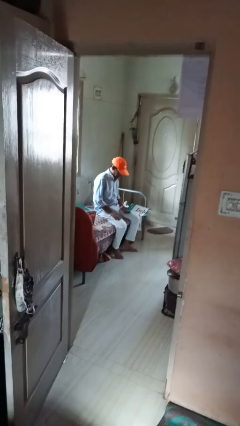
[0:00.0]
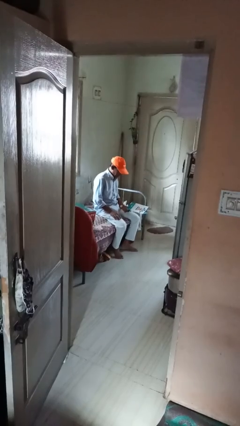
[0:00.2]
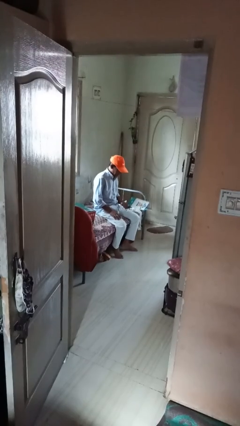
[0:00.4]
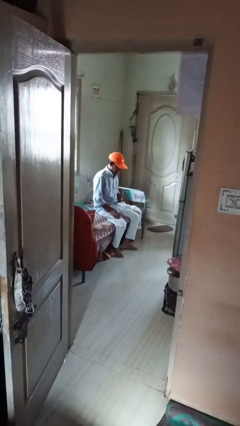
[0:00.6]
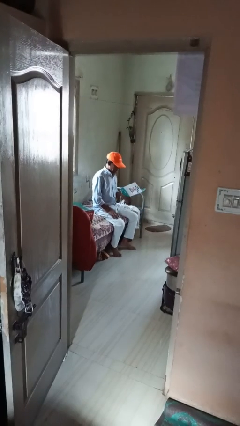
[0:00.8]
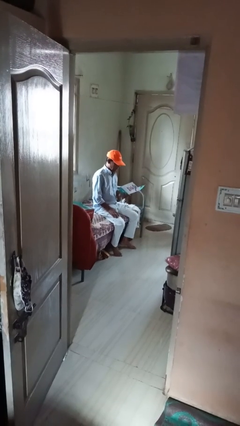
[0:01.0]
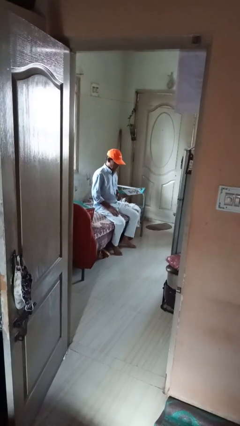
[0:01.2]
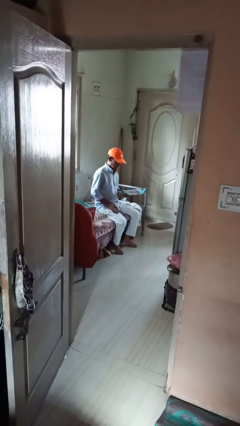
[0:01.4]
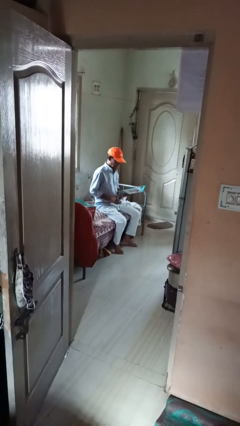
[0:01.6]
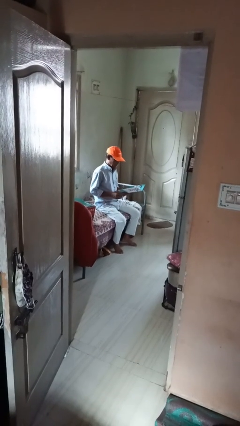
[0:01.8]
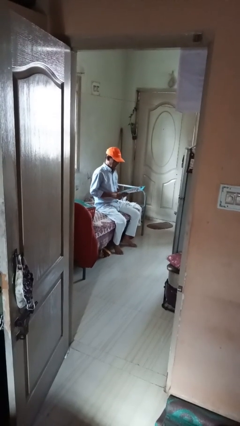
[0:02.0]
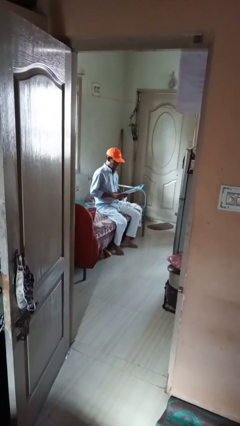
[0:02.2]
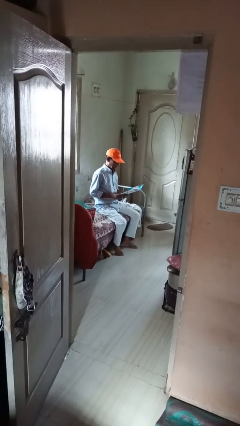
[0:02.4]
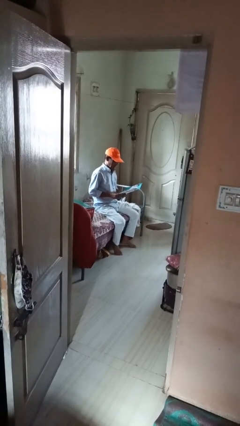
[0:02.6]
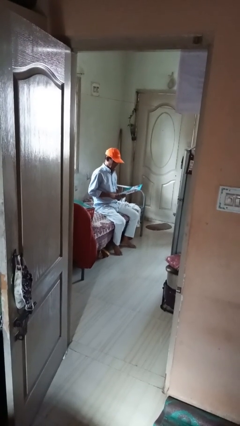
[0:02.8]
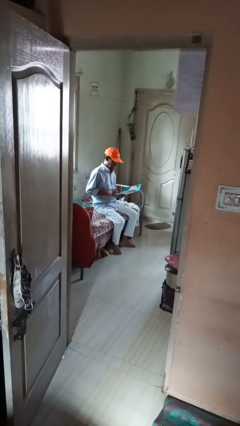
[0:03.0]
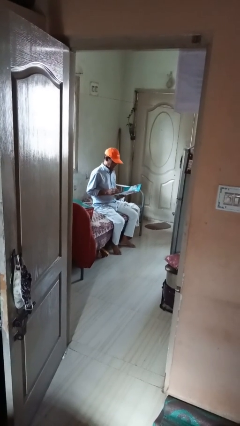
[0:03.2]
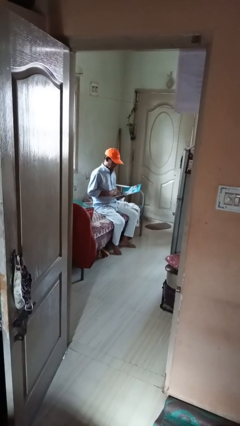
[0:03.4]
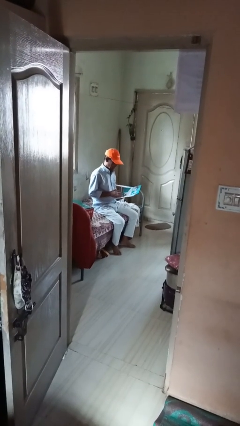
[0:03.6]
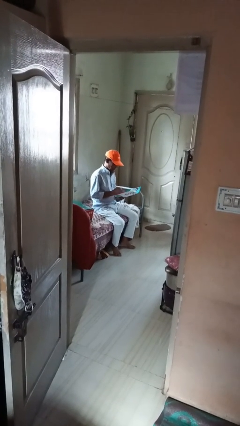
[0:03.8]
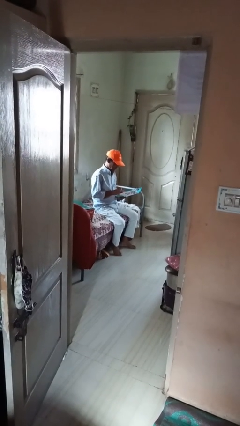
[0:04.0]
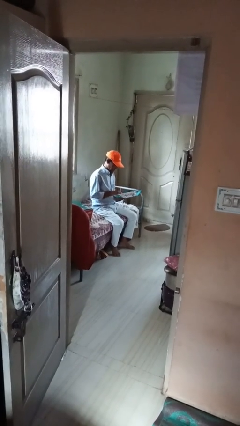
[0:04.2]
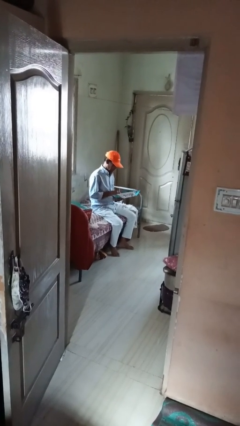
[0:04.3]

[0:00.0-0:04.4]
person reads magazine

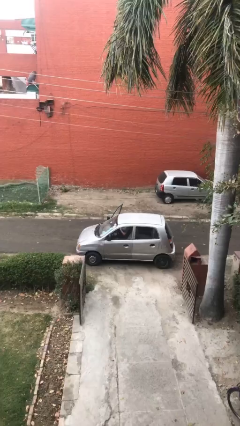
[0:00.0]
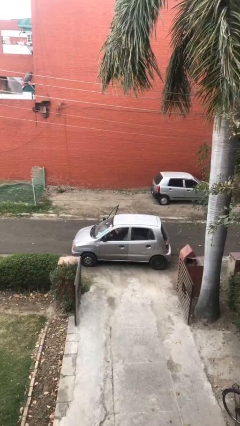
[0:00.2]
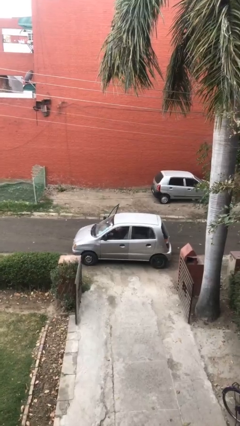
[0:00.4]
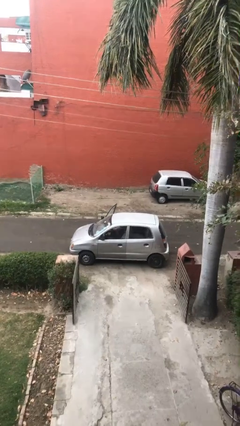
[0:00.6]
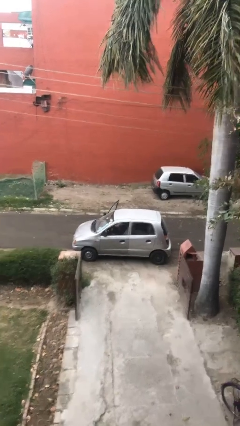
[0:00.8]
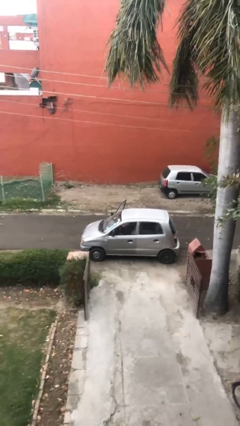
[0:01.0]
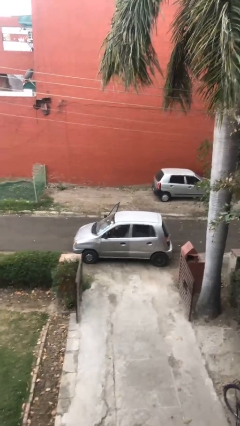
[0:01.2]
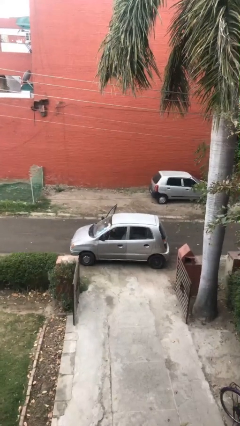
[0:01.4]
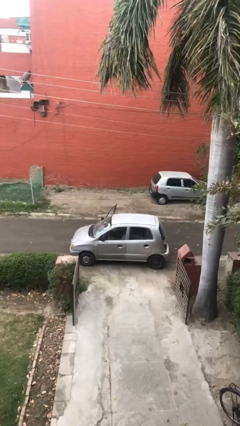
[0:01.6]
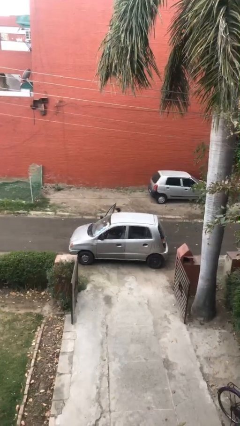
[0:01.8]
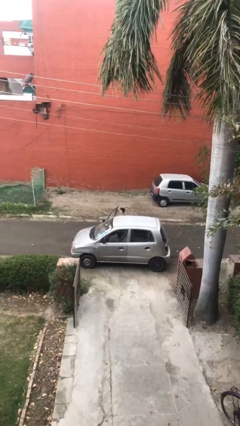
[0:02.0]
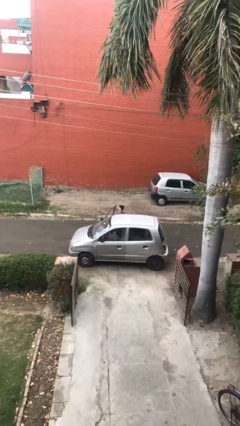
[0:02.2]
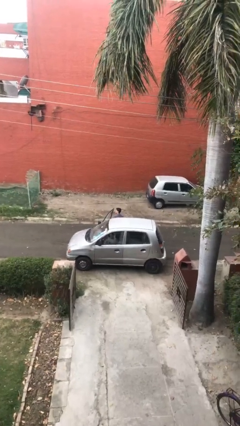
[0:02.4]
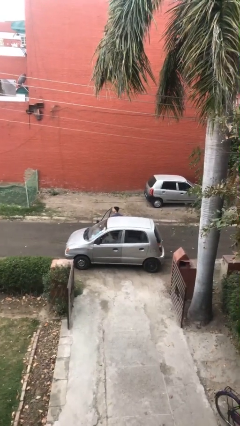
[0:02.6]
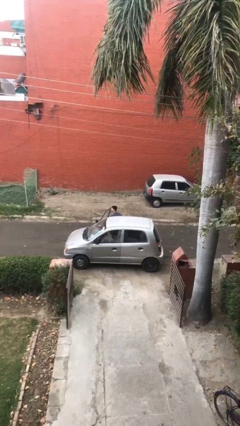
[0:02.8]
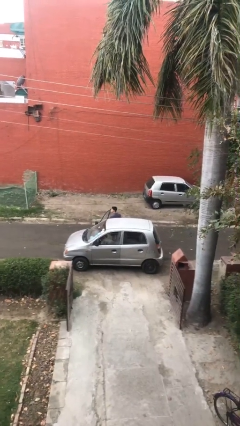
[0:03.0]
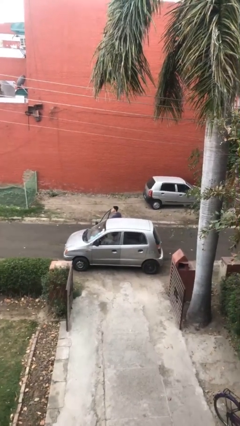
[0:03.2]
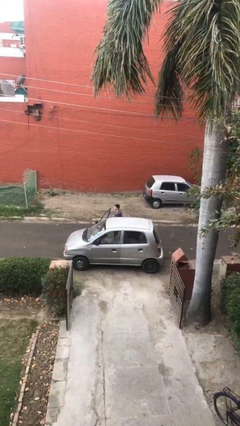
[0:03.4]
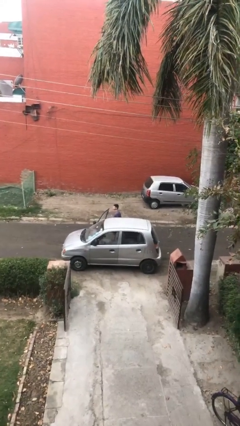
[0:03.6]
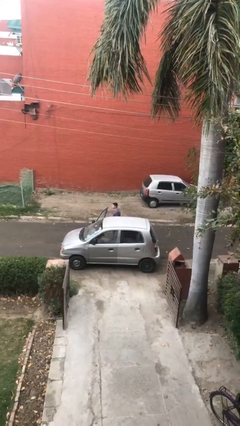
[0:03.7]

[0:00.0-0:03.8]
person exits car

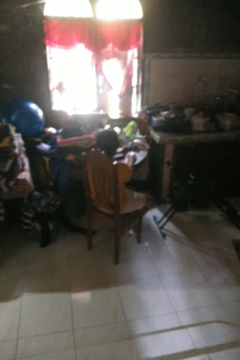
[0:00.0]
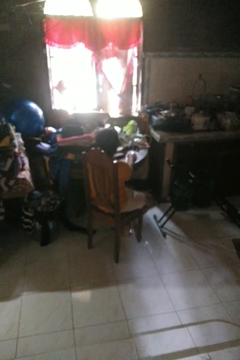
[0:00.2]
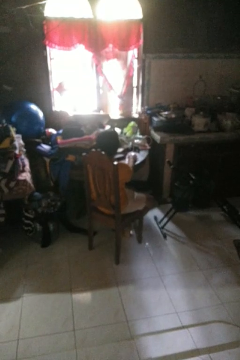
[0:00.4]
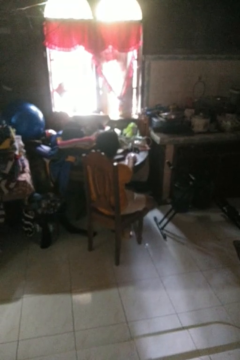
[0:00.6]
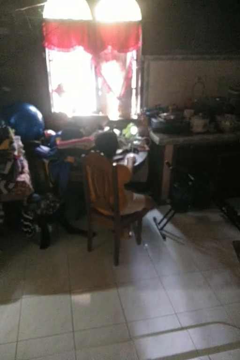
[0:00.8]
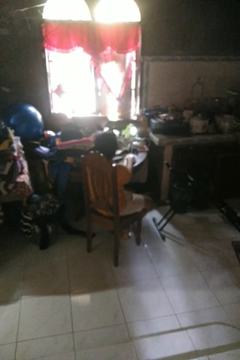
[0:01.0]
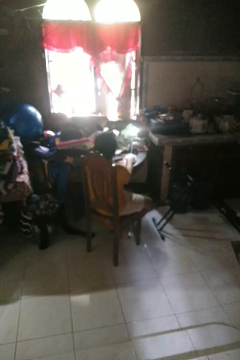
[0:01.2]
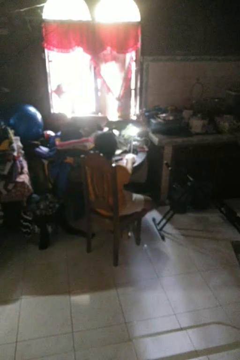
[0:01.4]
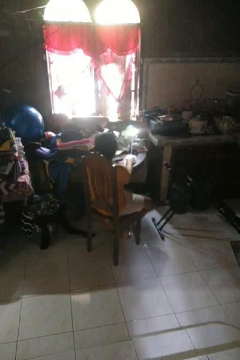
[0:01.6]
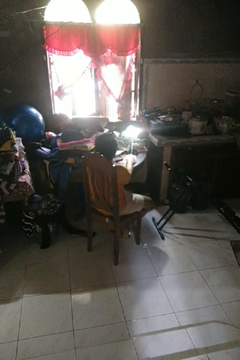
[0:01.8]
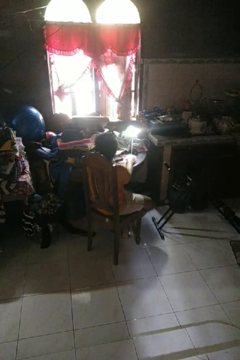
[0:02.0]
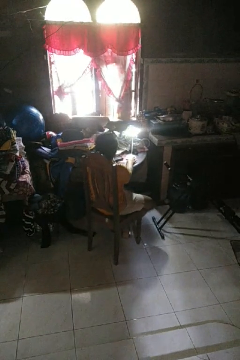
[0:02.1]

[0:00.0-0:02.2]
person turns on lamp

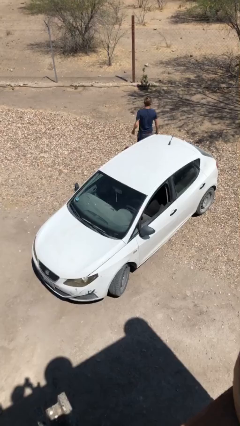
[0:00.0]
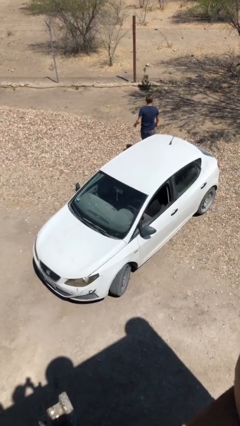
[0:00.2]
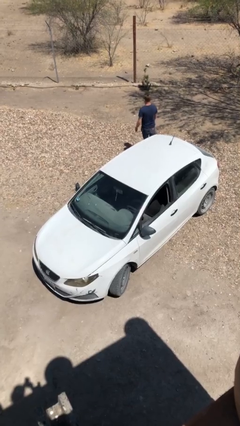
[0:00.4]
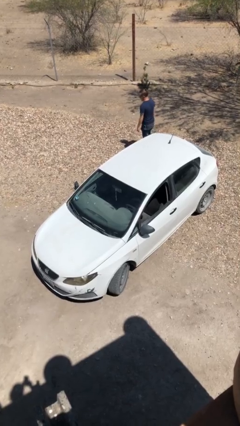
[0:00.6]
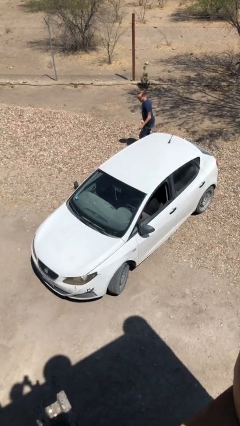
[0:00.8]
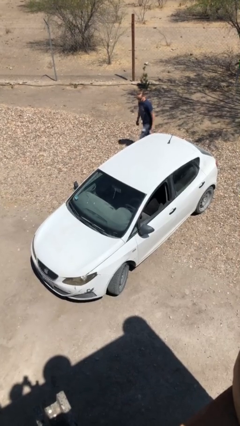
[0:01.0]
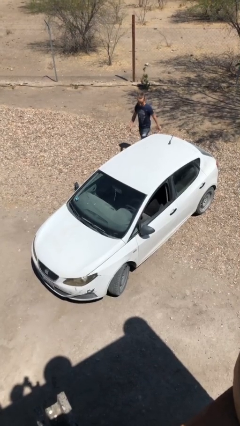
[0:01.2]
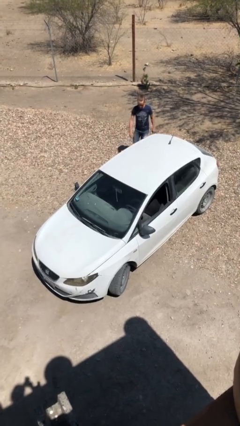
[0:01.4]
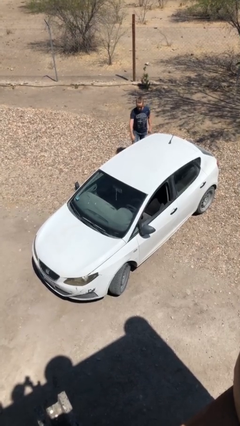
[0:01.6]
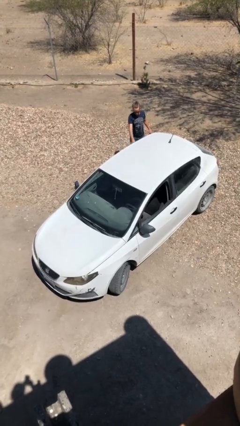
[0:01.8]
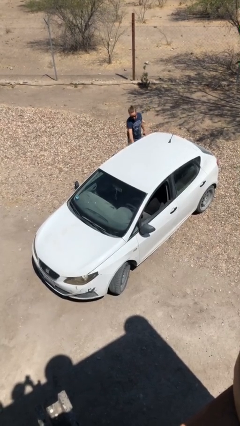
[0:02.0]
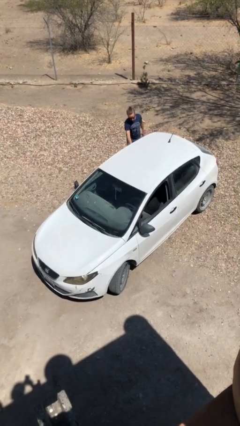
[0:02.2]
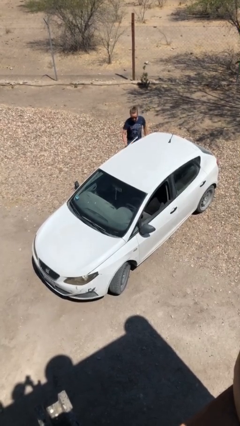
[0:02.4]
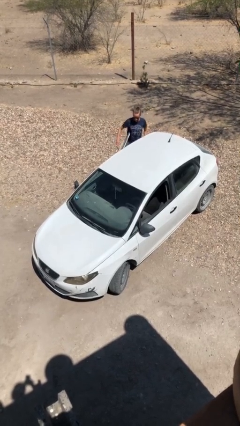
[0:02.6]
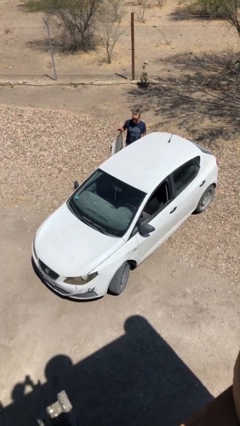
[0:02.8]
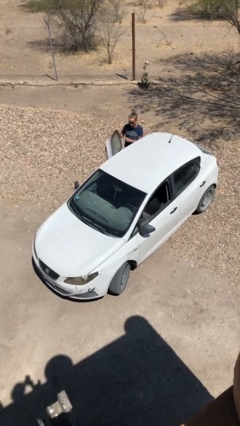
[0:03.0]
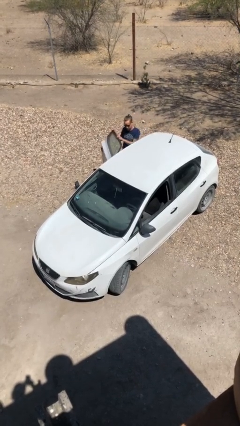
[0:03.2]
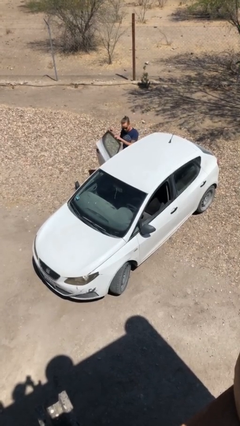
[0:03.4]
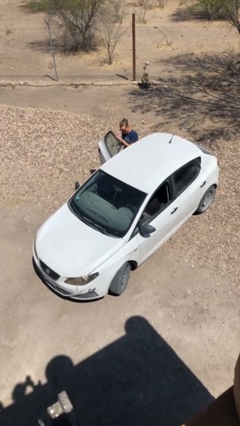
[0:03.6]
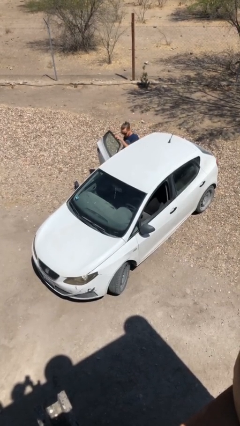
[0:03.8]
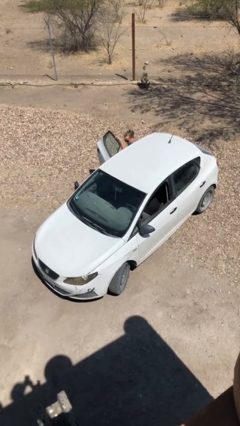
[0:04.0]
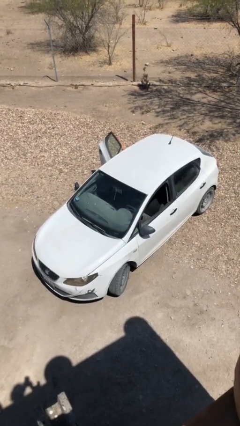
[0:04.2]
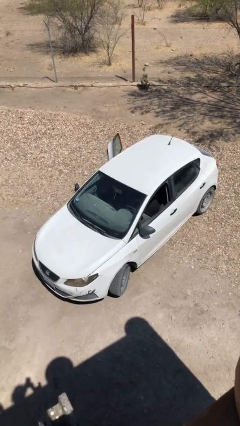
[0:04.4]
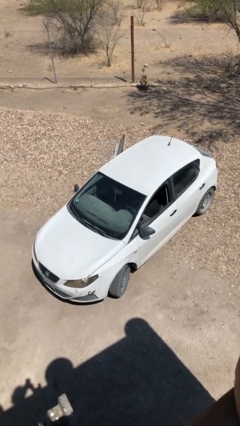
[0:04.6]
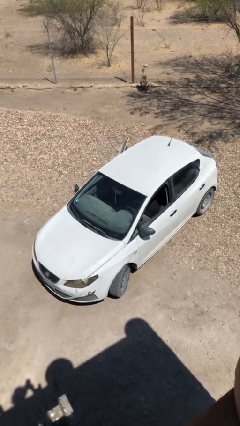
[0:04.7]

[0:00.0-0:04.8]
car picks up person

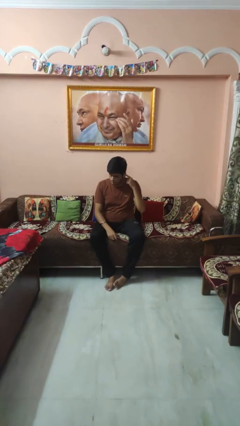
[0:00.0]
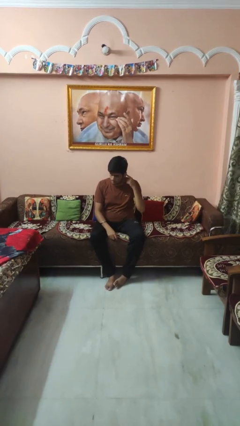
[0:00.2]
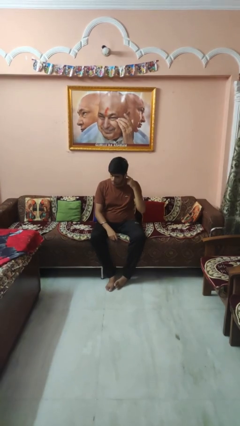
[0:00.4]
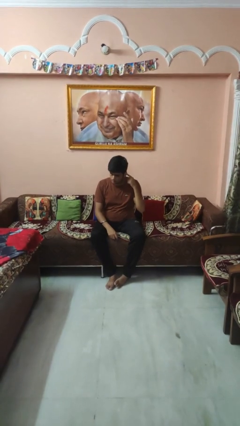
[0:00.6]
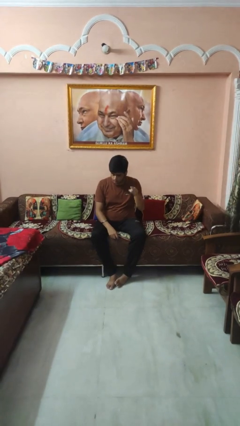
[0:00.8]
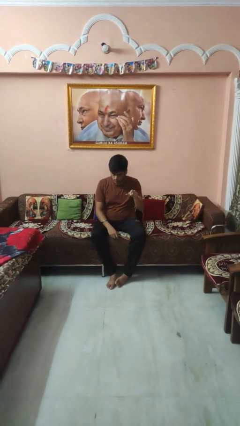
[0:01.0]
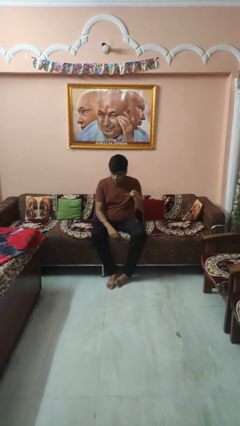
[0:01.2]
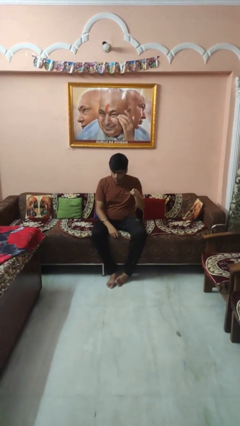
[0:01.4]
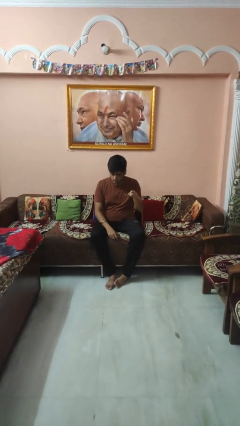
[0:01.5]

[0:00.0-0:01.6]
person gestures listen closely

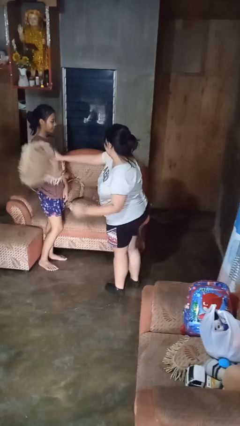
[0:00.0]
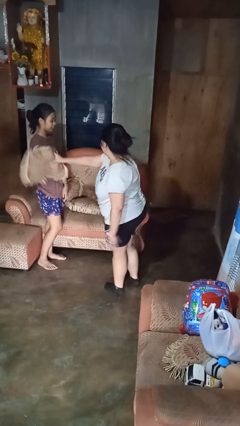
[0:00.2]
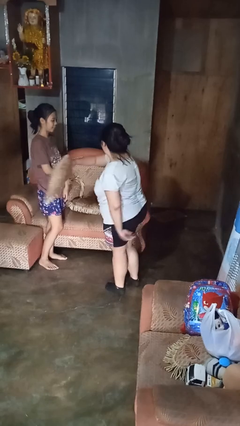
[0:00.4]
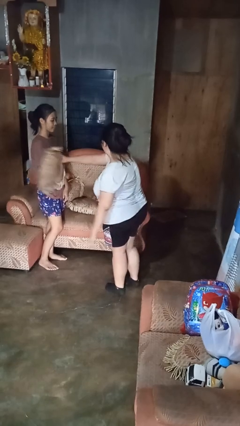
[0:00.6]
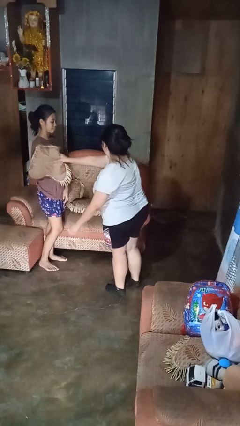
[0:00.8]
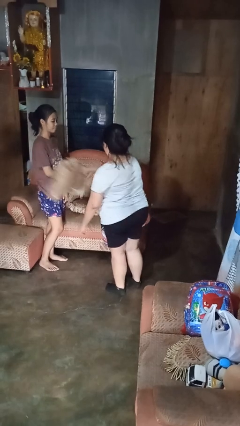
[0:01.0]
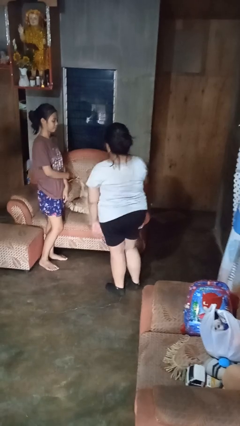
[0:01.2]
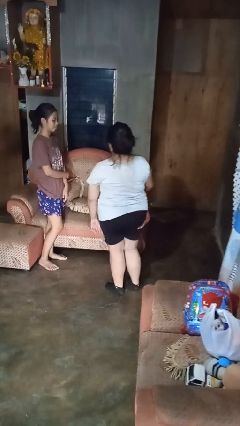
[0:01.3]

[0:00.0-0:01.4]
person hits person with pillow
